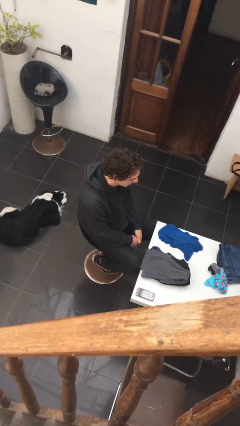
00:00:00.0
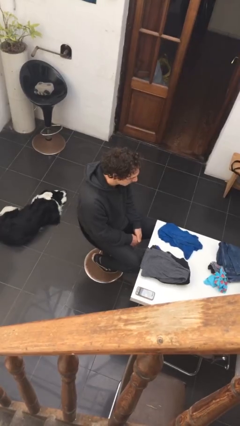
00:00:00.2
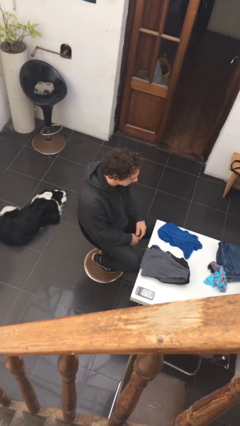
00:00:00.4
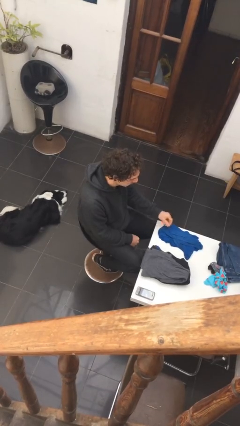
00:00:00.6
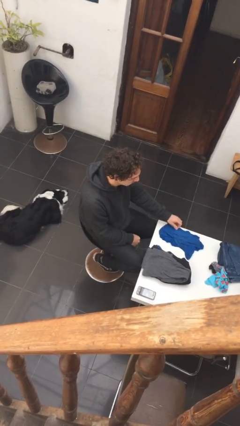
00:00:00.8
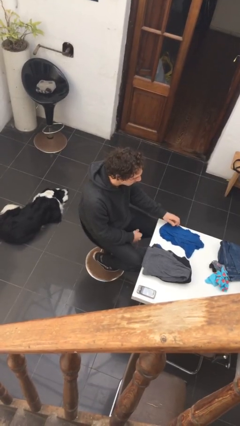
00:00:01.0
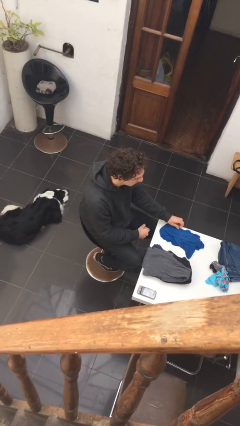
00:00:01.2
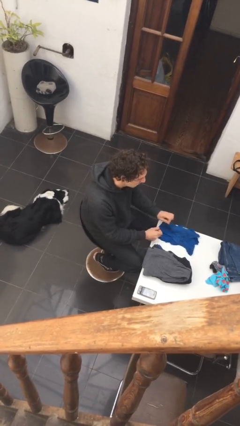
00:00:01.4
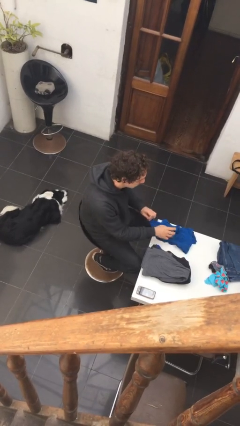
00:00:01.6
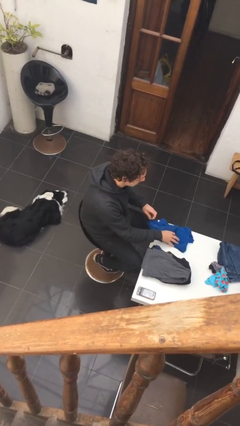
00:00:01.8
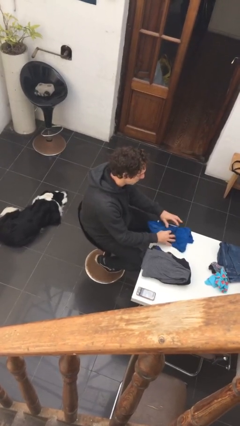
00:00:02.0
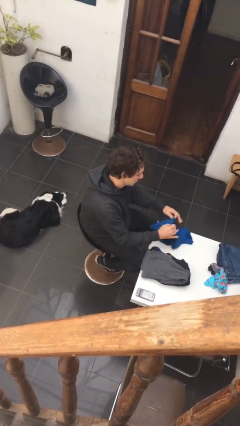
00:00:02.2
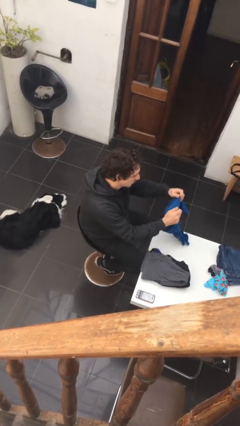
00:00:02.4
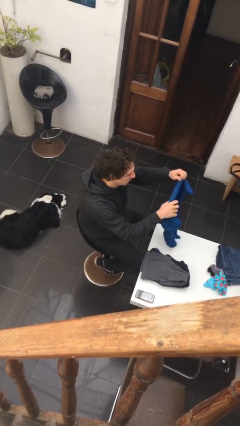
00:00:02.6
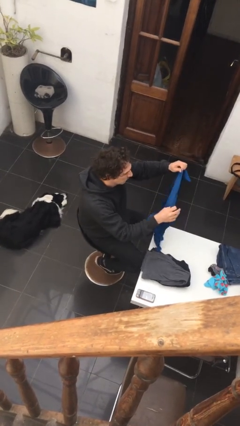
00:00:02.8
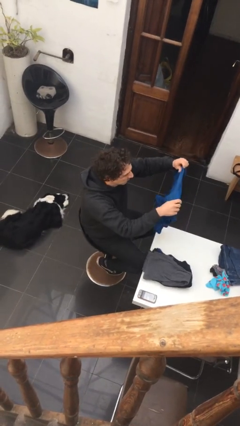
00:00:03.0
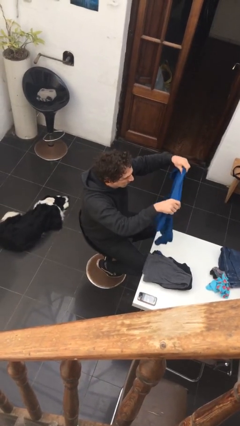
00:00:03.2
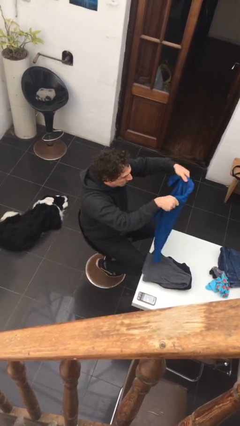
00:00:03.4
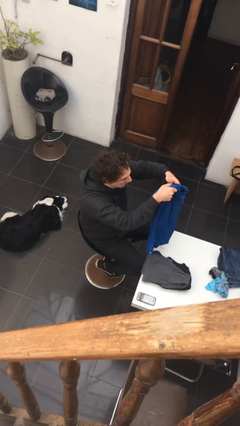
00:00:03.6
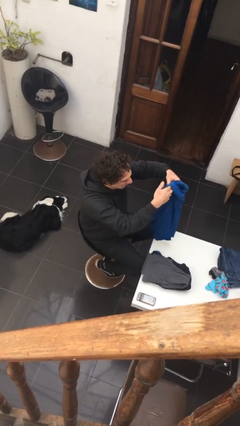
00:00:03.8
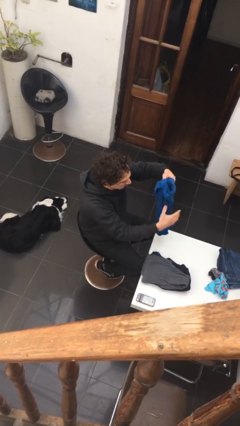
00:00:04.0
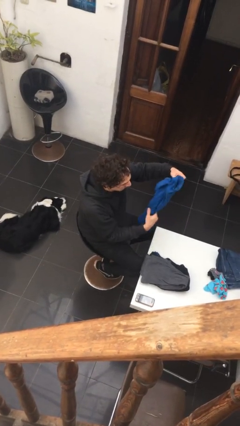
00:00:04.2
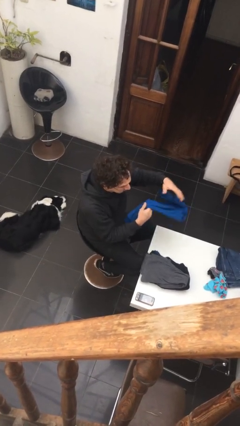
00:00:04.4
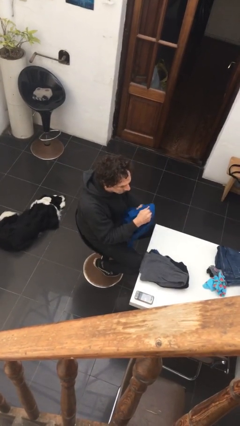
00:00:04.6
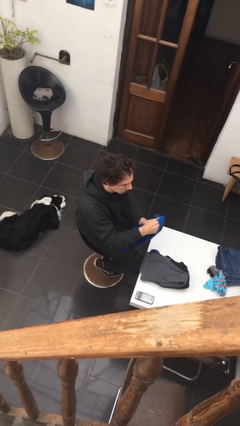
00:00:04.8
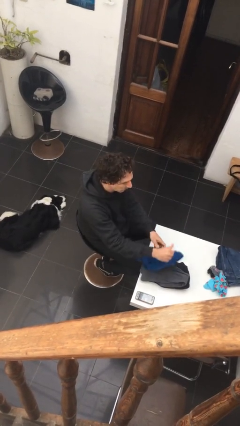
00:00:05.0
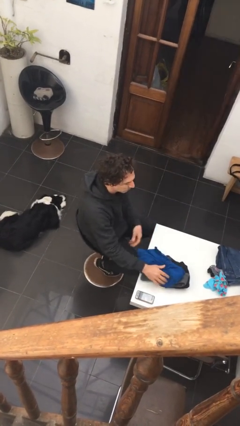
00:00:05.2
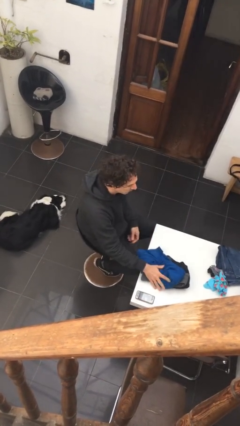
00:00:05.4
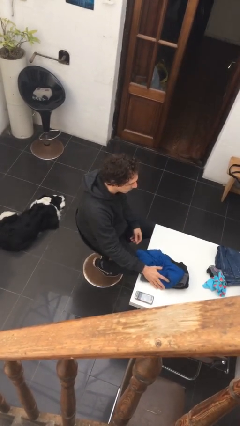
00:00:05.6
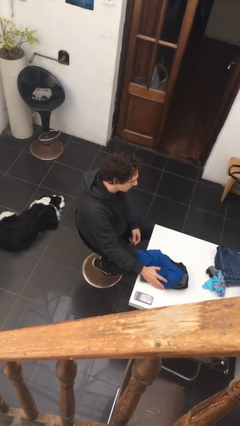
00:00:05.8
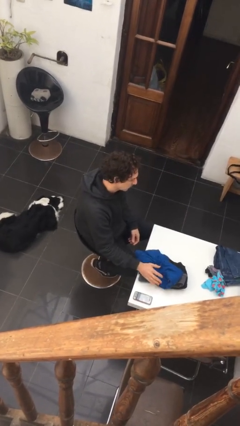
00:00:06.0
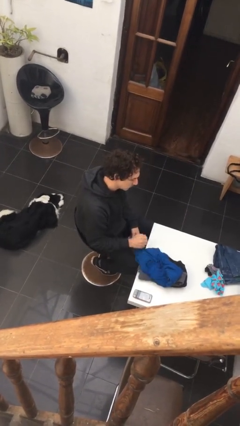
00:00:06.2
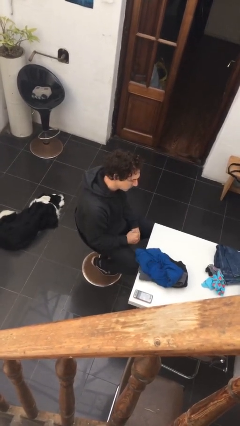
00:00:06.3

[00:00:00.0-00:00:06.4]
person folds shirt

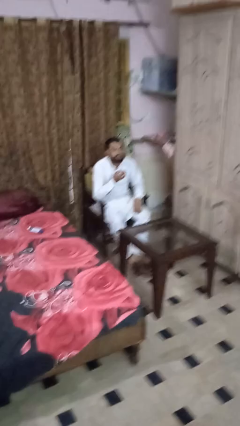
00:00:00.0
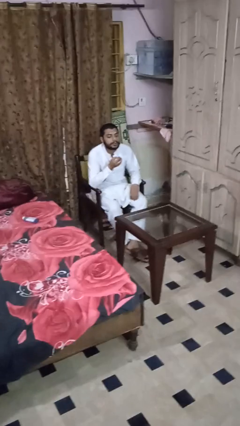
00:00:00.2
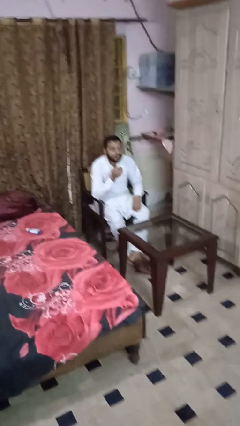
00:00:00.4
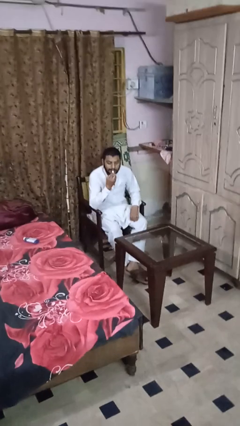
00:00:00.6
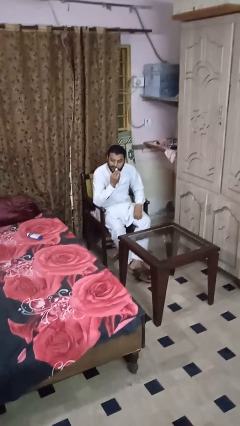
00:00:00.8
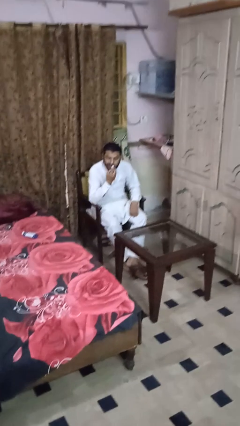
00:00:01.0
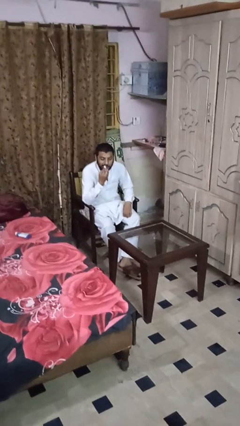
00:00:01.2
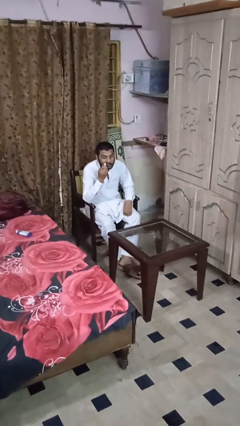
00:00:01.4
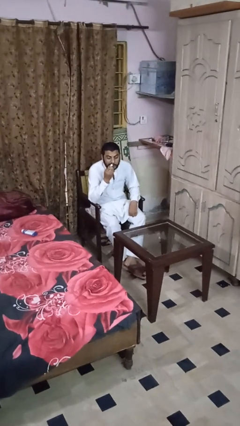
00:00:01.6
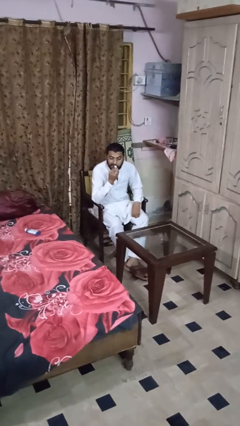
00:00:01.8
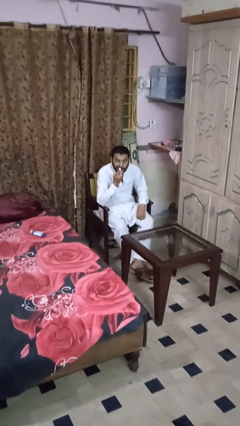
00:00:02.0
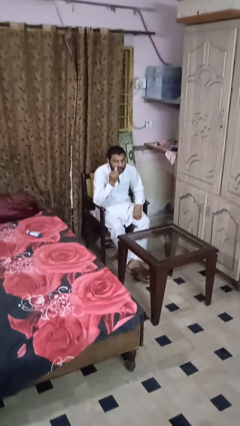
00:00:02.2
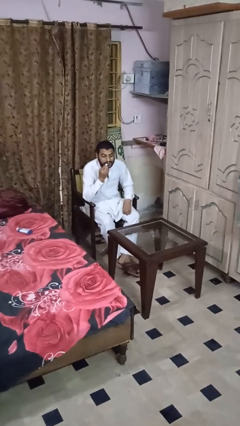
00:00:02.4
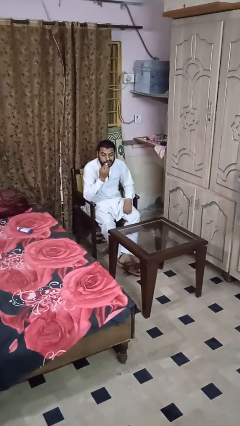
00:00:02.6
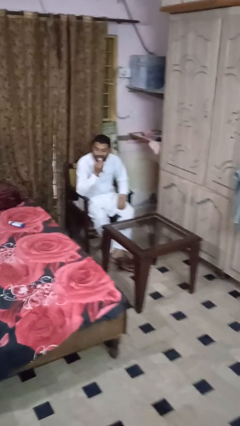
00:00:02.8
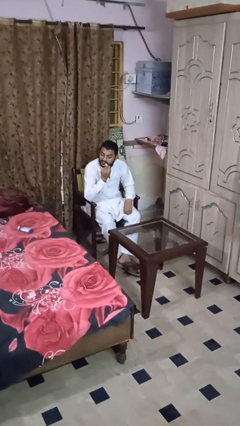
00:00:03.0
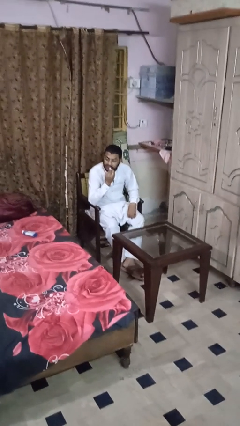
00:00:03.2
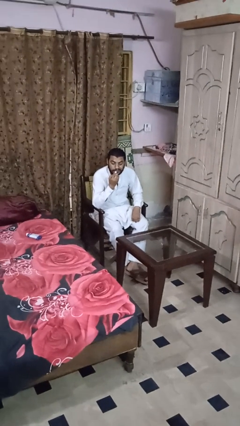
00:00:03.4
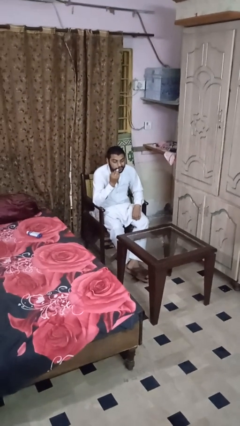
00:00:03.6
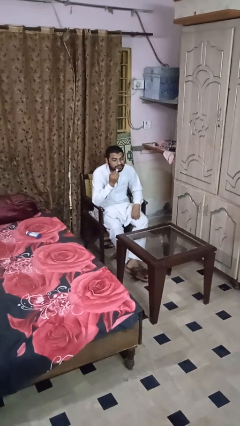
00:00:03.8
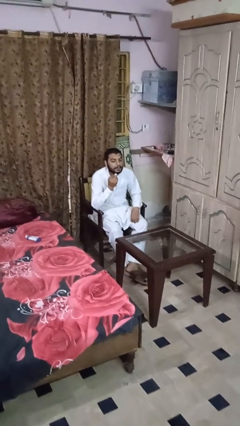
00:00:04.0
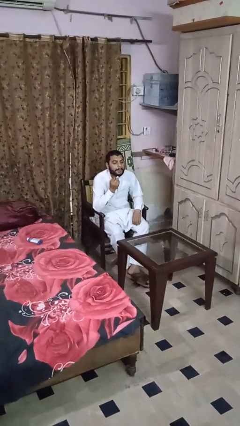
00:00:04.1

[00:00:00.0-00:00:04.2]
person applies lip makeup

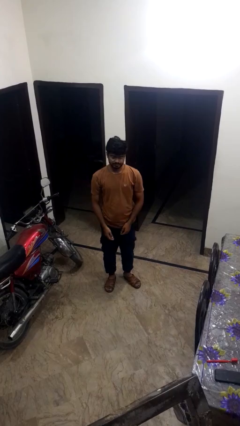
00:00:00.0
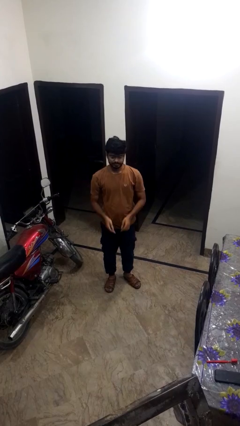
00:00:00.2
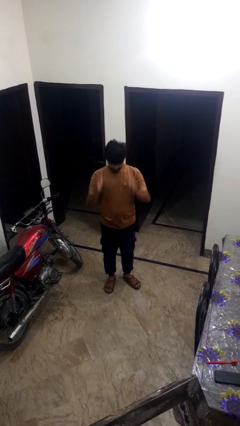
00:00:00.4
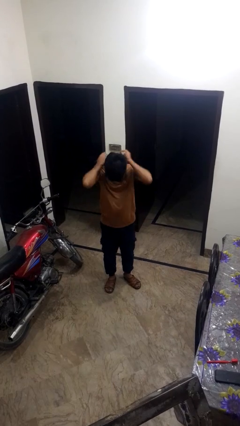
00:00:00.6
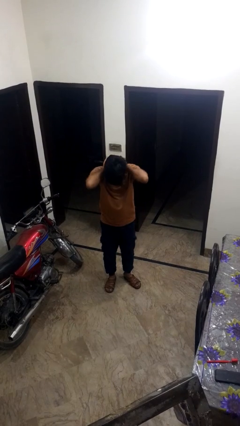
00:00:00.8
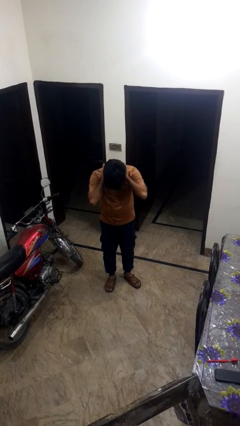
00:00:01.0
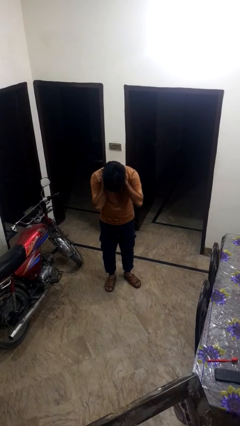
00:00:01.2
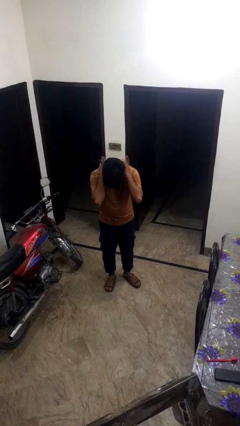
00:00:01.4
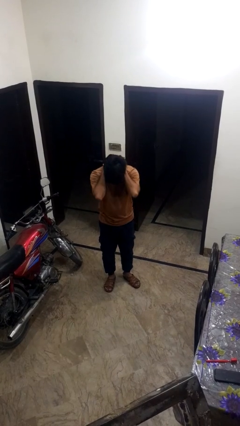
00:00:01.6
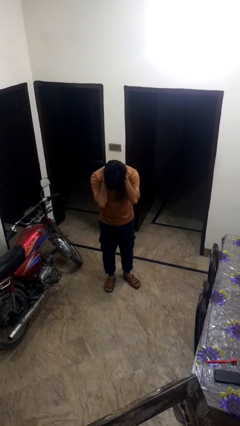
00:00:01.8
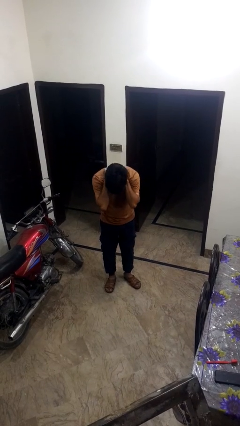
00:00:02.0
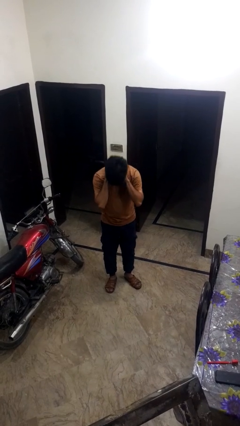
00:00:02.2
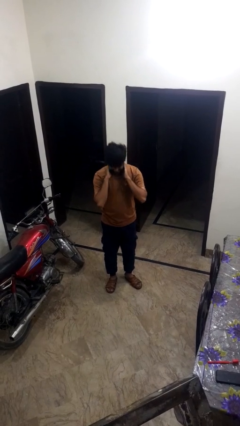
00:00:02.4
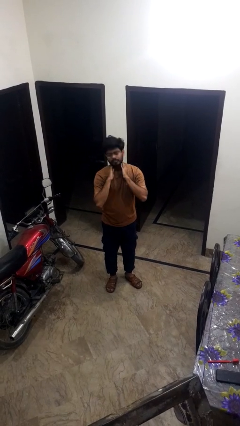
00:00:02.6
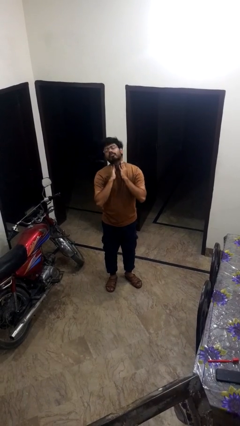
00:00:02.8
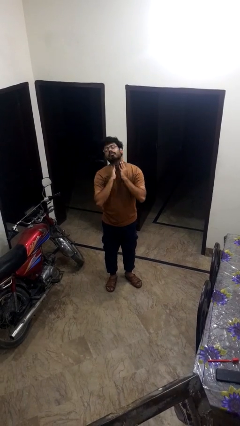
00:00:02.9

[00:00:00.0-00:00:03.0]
person rubs neck

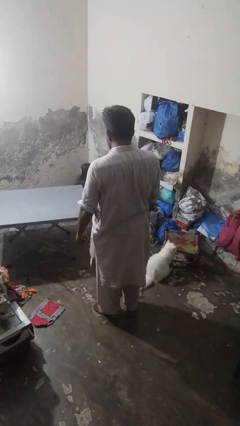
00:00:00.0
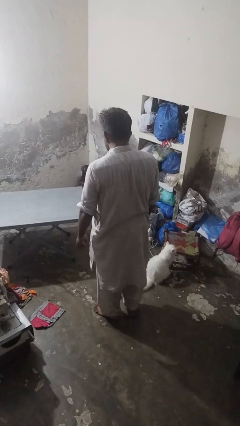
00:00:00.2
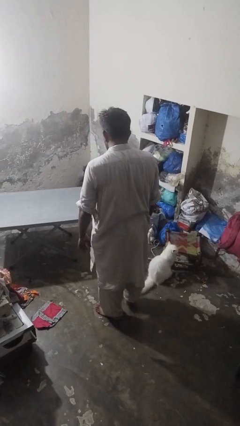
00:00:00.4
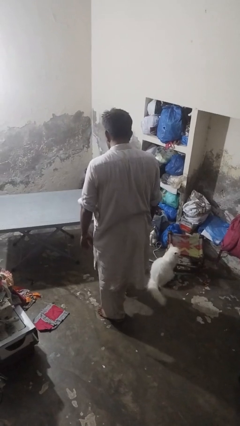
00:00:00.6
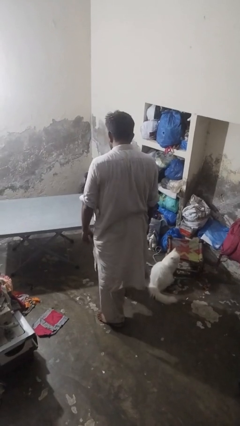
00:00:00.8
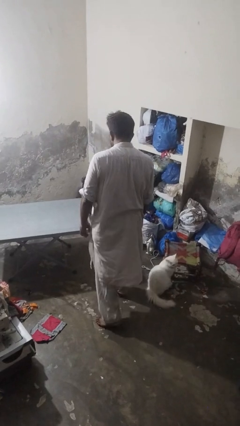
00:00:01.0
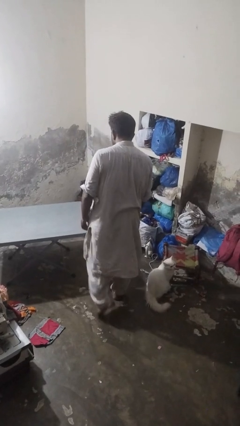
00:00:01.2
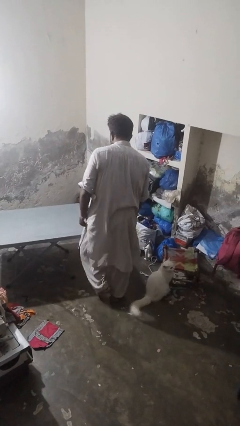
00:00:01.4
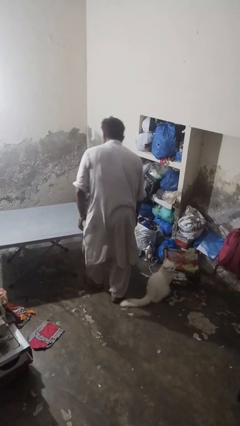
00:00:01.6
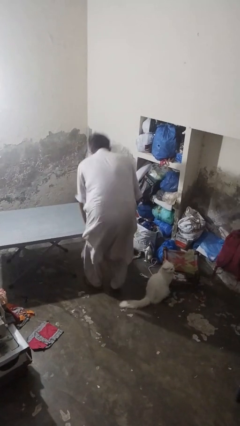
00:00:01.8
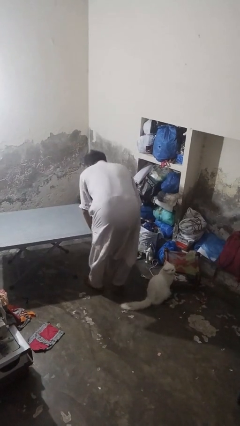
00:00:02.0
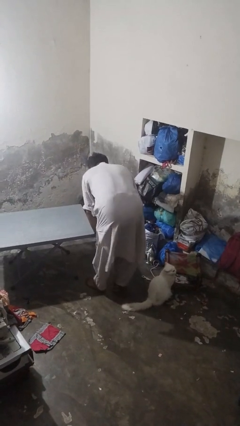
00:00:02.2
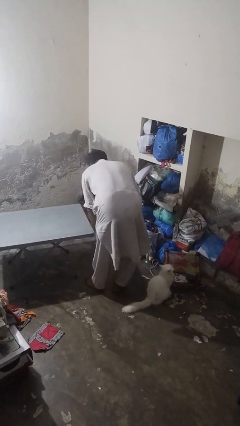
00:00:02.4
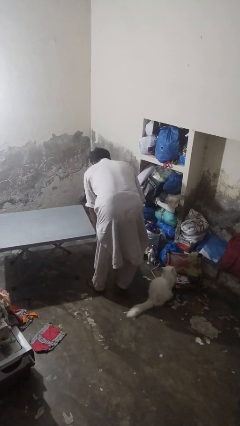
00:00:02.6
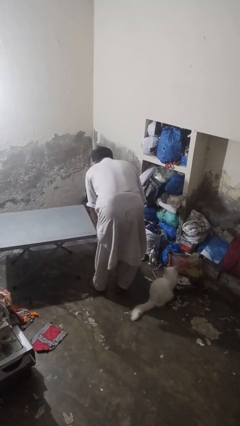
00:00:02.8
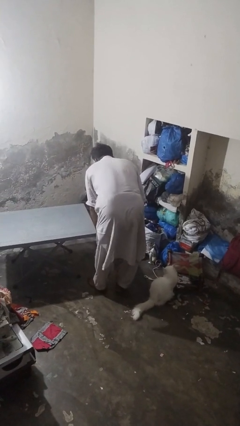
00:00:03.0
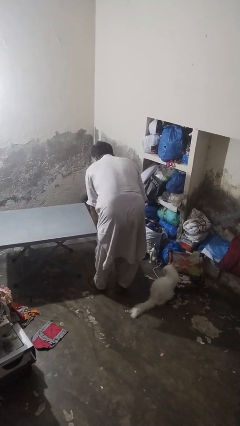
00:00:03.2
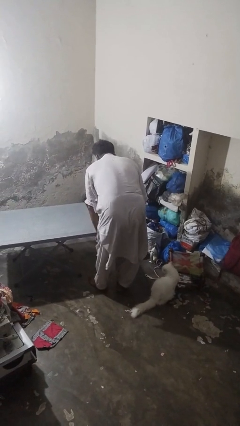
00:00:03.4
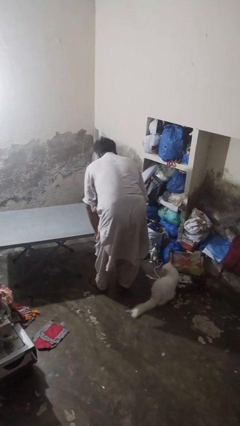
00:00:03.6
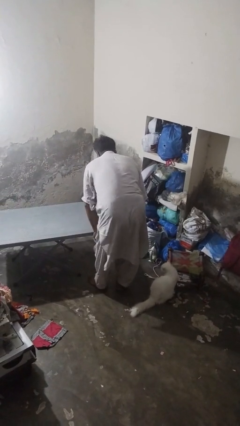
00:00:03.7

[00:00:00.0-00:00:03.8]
person bumps into table

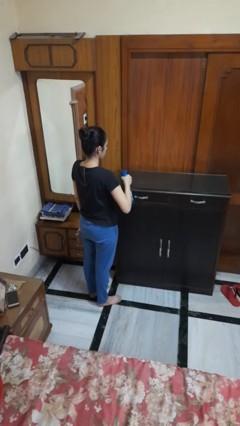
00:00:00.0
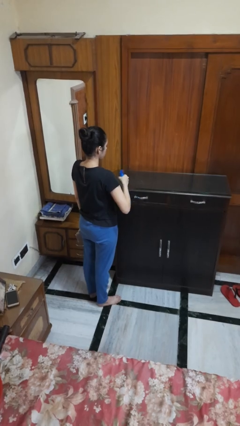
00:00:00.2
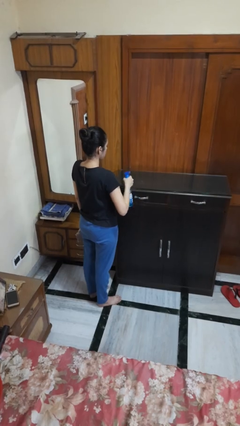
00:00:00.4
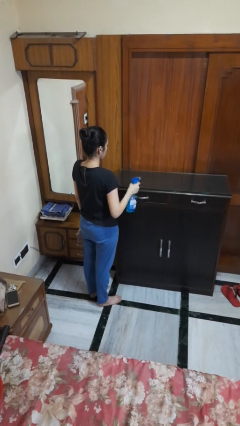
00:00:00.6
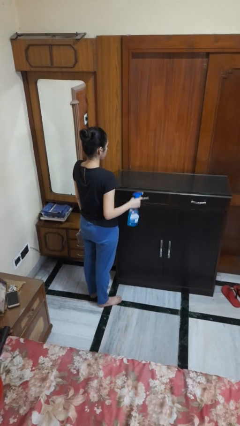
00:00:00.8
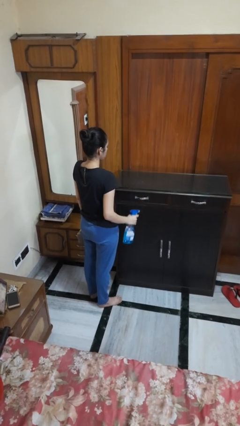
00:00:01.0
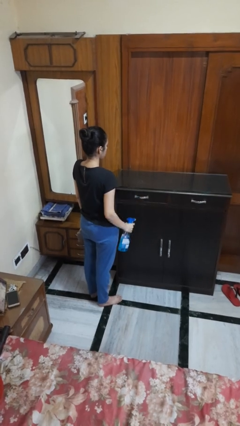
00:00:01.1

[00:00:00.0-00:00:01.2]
person sprays from bottle
